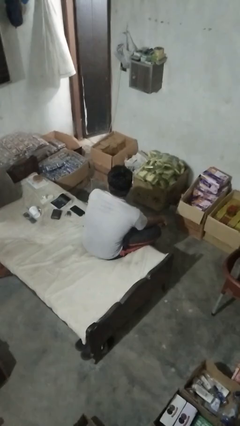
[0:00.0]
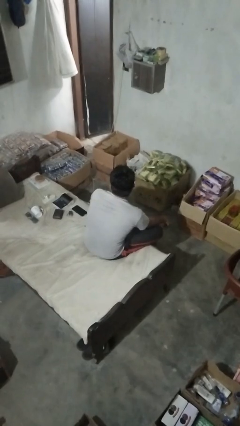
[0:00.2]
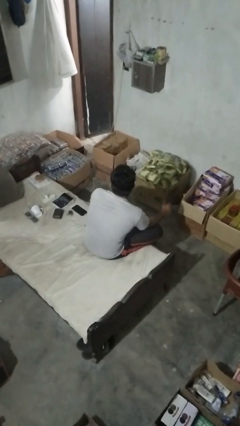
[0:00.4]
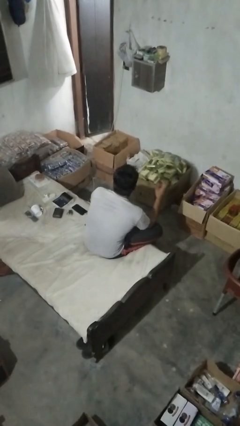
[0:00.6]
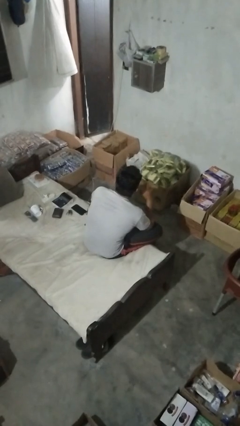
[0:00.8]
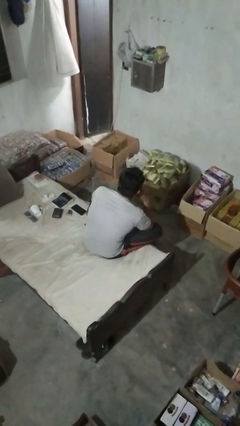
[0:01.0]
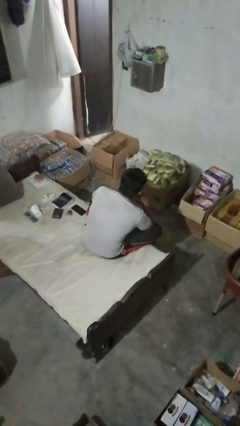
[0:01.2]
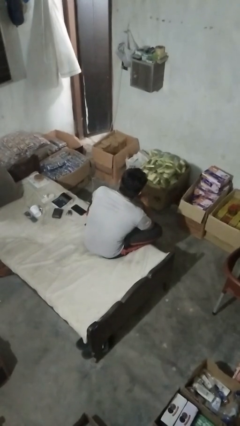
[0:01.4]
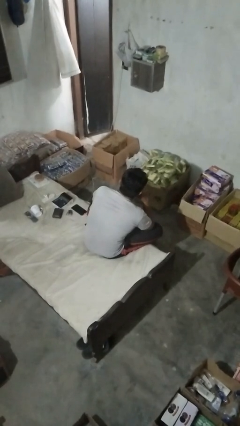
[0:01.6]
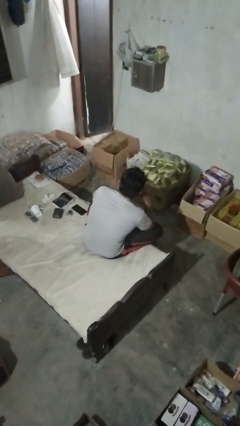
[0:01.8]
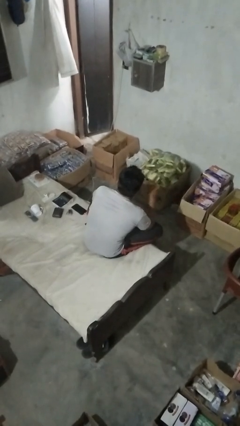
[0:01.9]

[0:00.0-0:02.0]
person strokes chin

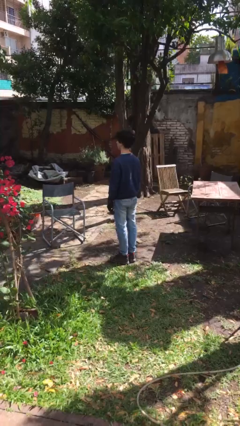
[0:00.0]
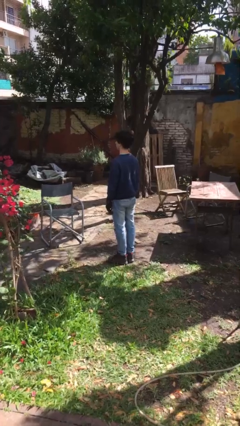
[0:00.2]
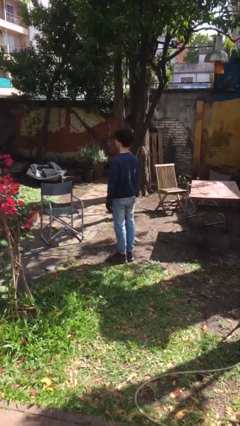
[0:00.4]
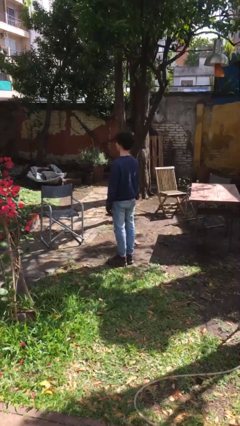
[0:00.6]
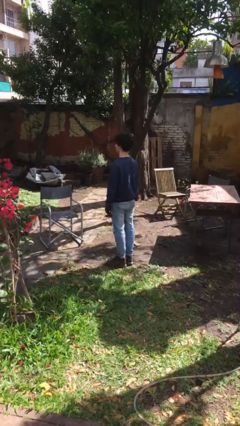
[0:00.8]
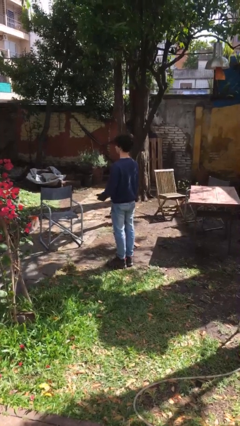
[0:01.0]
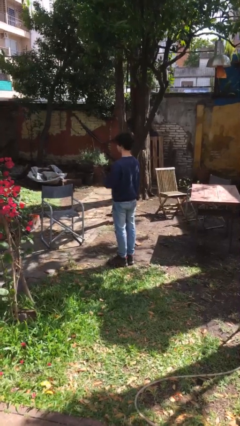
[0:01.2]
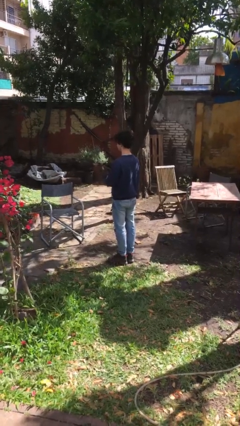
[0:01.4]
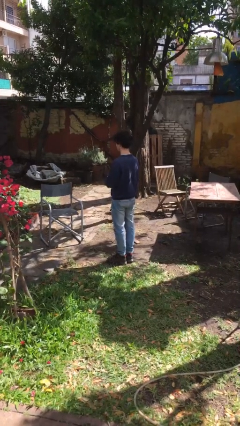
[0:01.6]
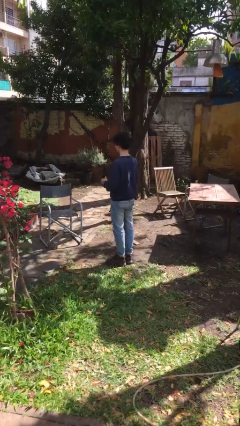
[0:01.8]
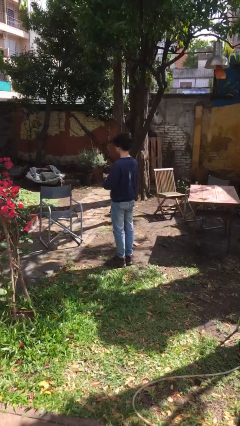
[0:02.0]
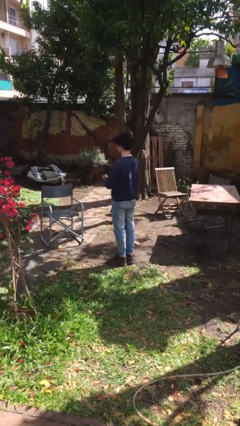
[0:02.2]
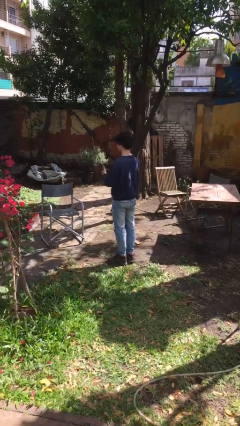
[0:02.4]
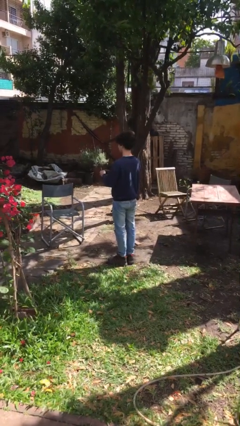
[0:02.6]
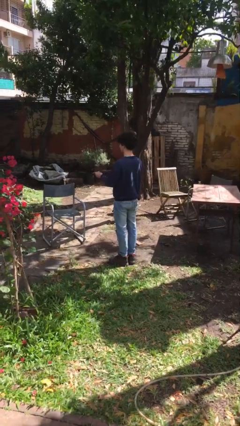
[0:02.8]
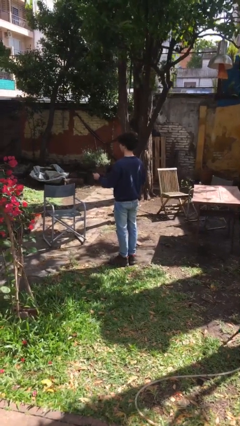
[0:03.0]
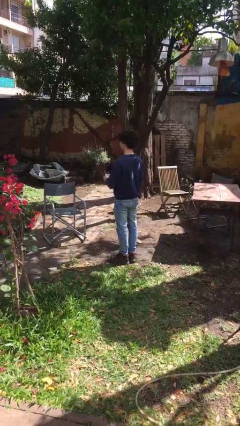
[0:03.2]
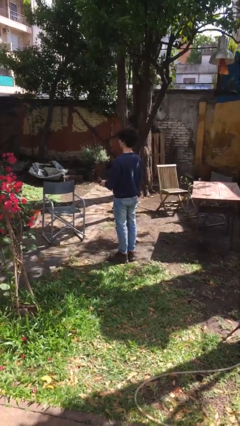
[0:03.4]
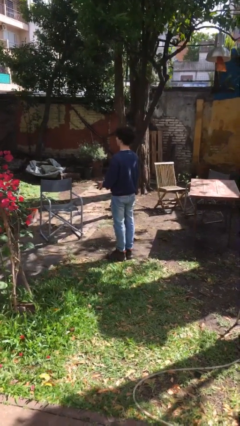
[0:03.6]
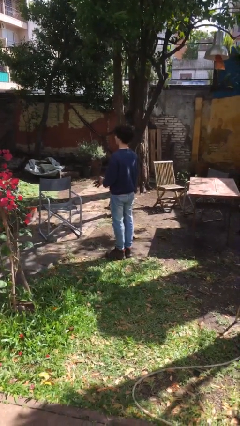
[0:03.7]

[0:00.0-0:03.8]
person takes off gloves

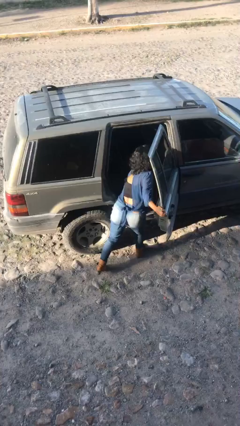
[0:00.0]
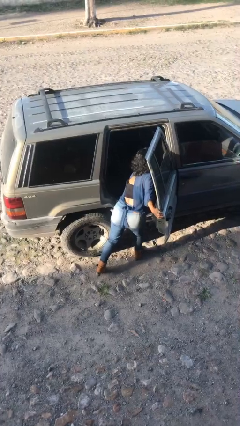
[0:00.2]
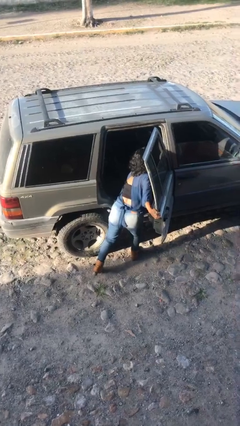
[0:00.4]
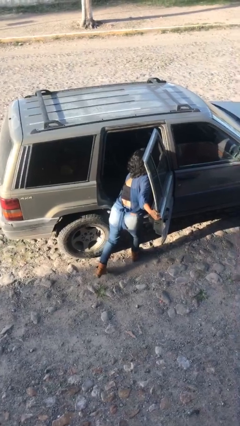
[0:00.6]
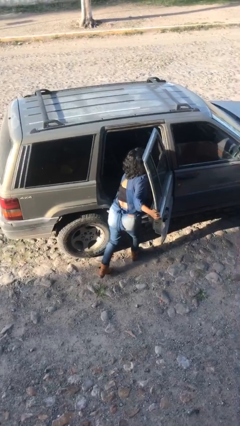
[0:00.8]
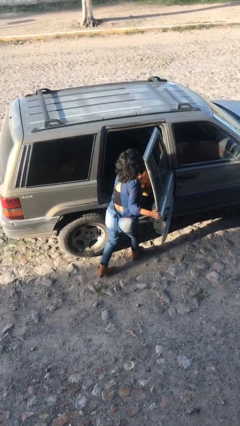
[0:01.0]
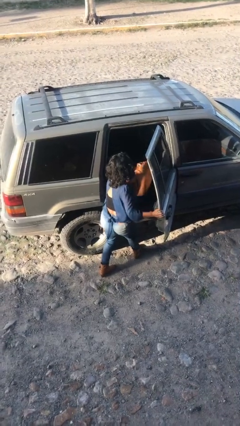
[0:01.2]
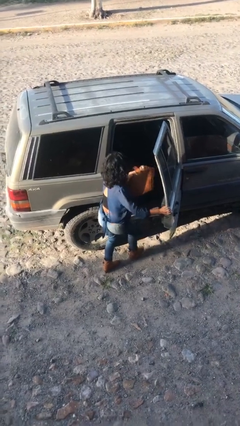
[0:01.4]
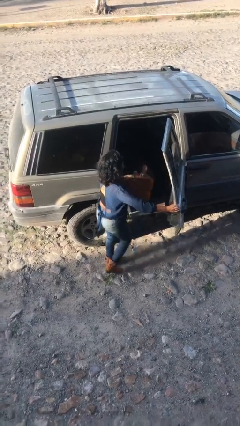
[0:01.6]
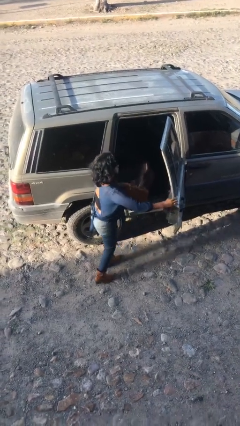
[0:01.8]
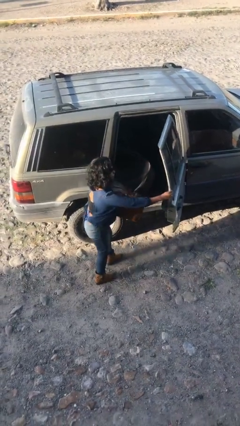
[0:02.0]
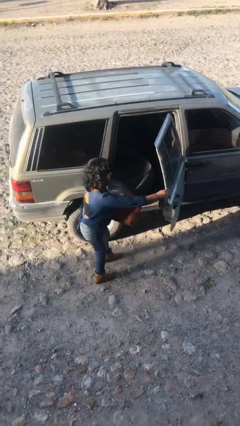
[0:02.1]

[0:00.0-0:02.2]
person unloads car

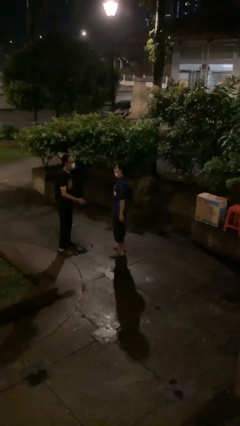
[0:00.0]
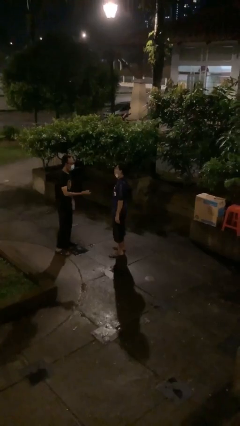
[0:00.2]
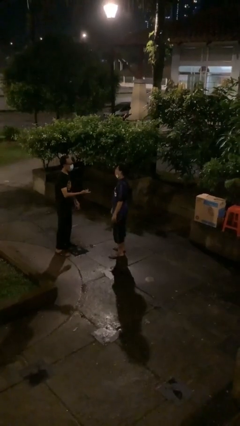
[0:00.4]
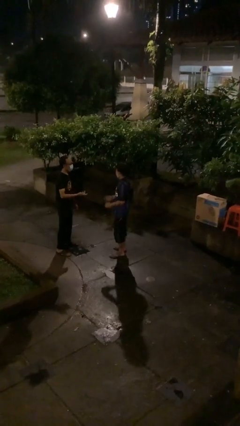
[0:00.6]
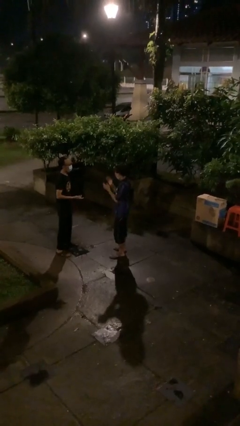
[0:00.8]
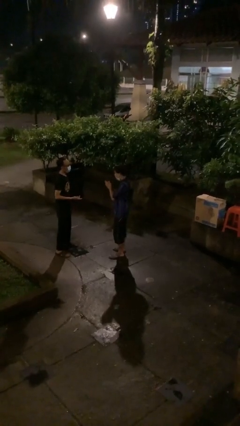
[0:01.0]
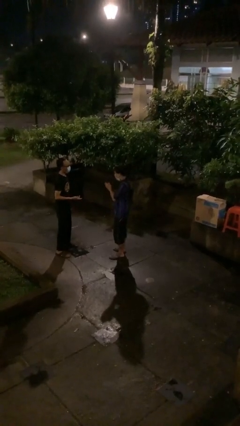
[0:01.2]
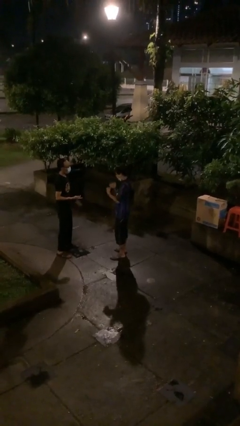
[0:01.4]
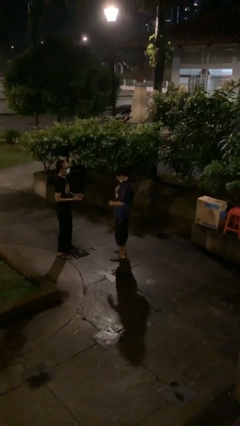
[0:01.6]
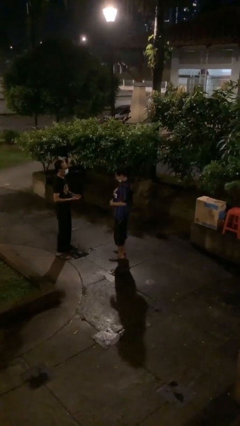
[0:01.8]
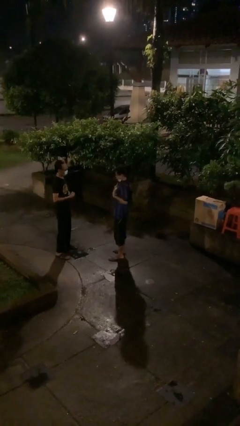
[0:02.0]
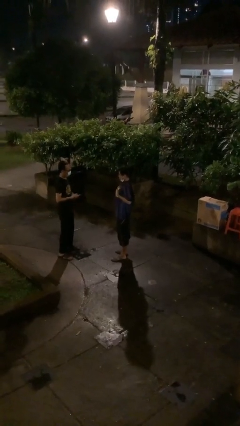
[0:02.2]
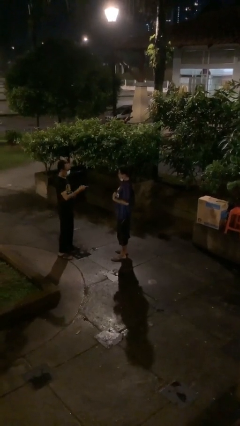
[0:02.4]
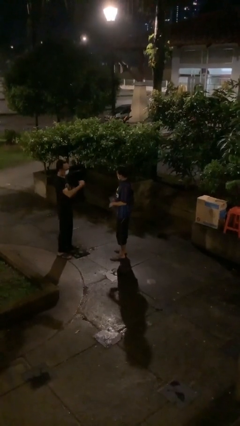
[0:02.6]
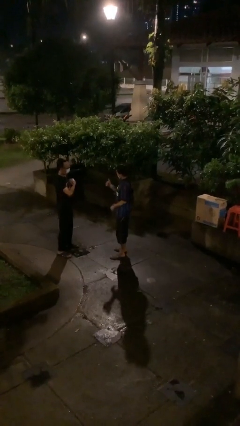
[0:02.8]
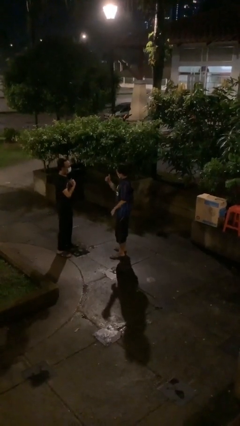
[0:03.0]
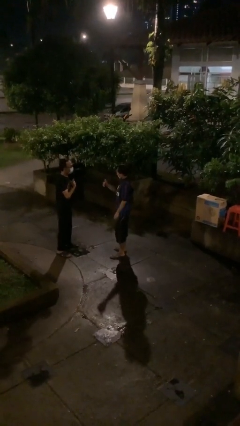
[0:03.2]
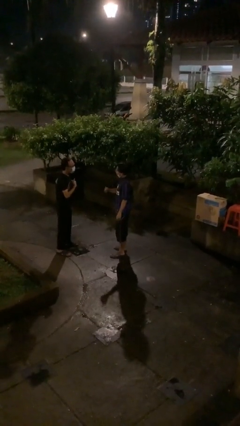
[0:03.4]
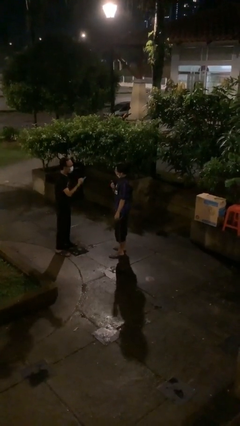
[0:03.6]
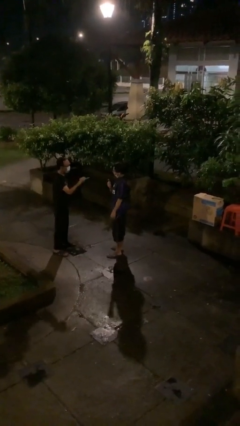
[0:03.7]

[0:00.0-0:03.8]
person talks to person

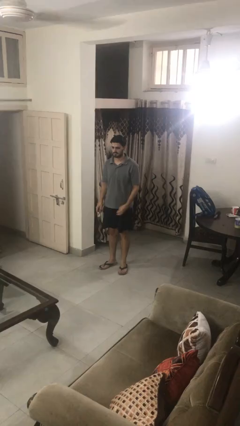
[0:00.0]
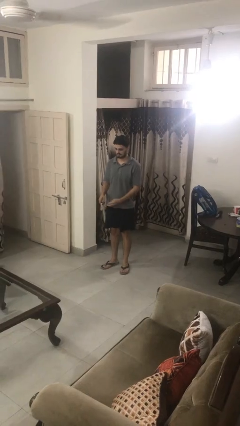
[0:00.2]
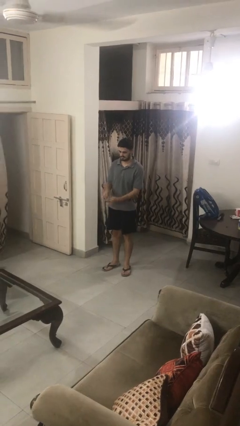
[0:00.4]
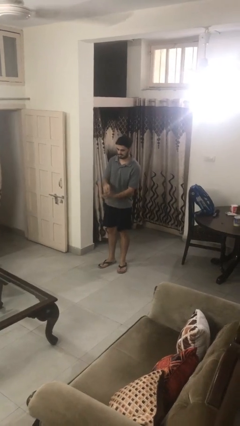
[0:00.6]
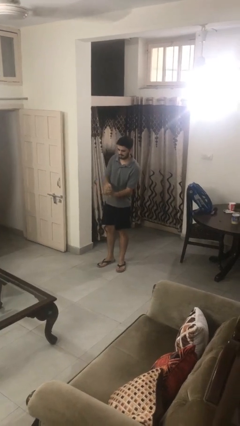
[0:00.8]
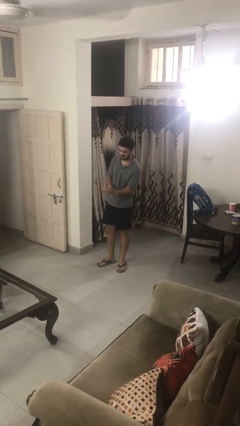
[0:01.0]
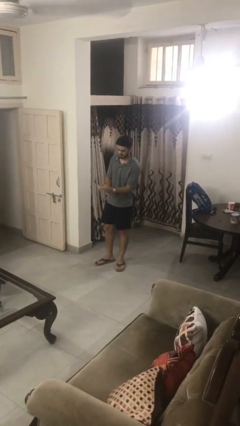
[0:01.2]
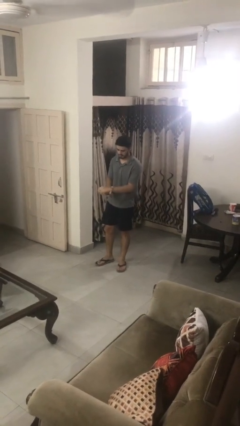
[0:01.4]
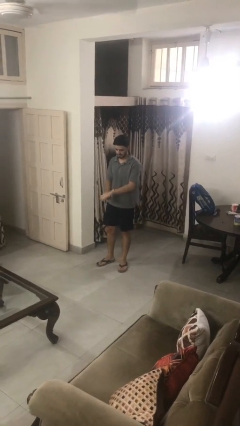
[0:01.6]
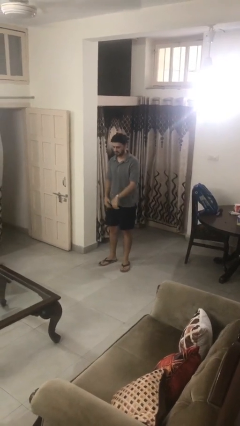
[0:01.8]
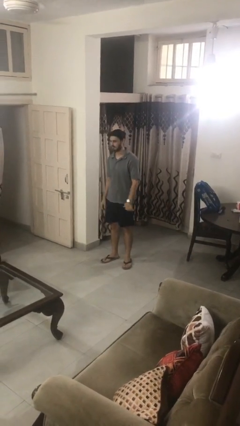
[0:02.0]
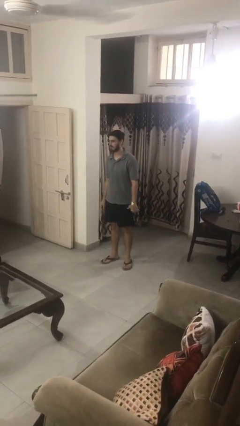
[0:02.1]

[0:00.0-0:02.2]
person puts on wristwatch

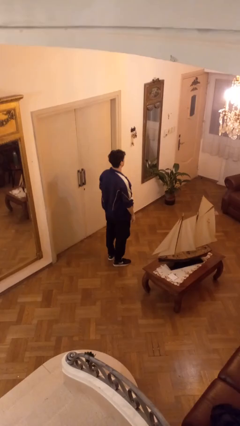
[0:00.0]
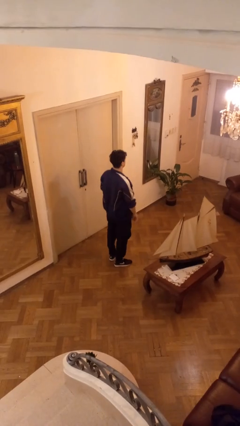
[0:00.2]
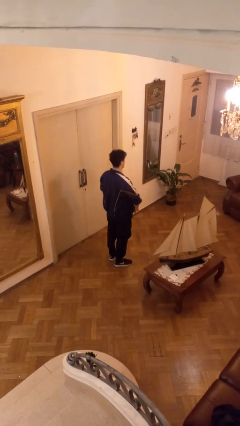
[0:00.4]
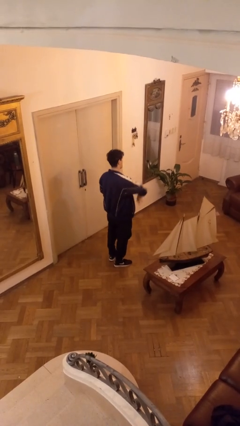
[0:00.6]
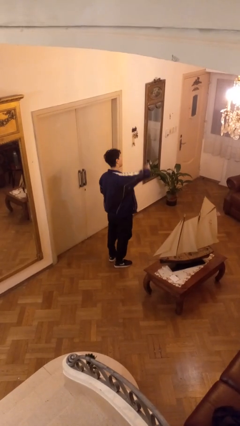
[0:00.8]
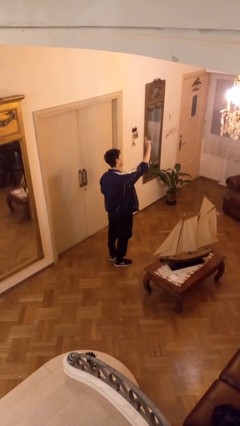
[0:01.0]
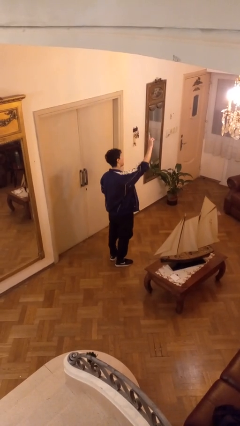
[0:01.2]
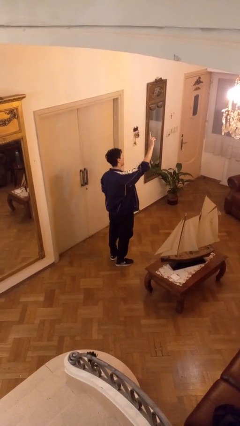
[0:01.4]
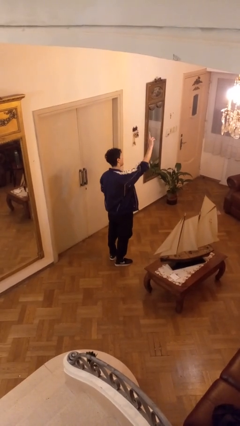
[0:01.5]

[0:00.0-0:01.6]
person gestures swipe up

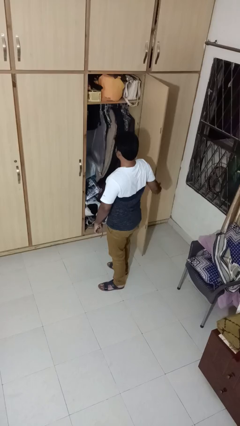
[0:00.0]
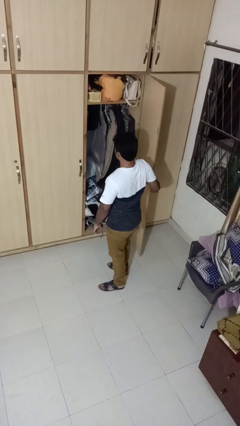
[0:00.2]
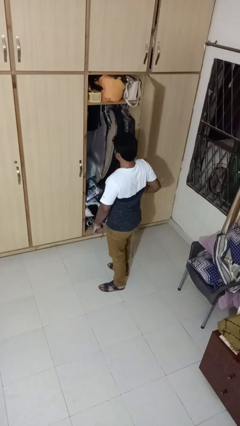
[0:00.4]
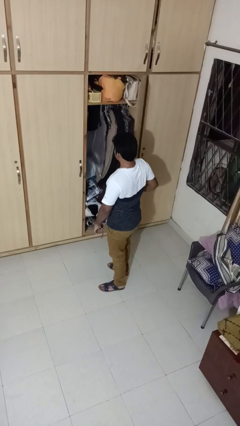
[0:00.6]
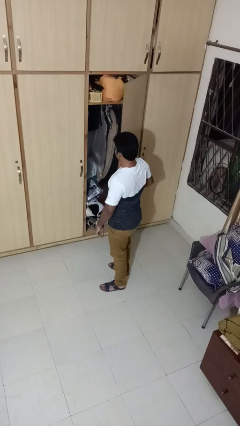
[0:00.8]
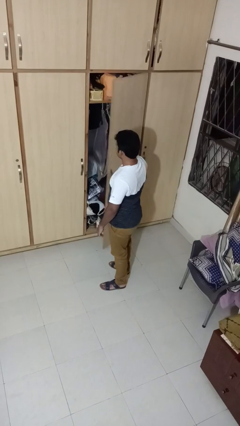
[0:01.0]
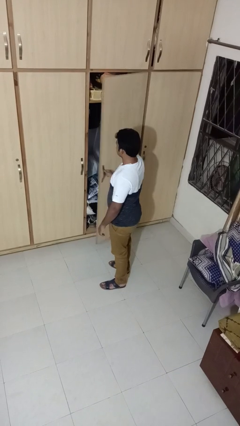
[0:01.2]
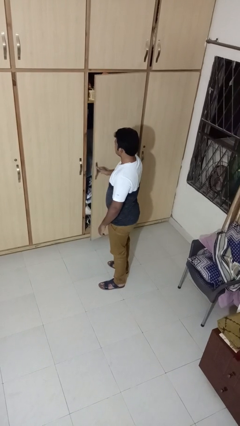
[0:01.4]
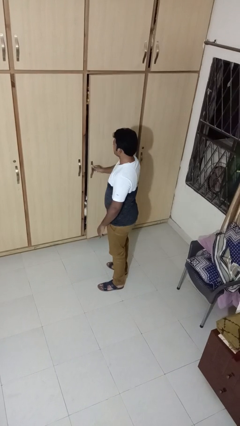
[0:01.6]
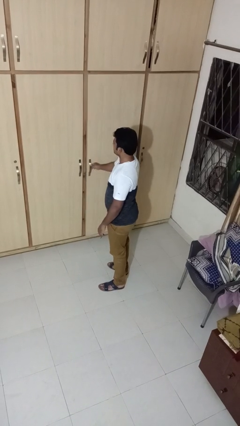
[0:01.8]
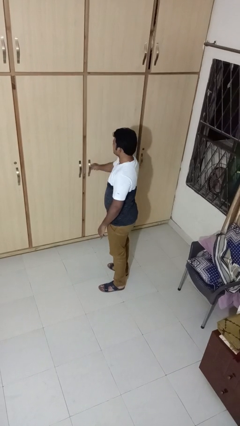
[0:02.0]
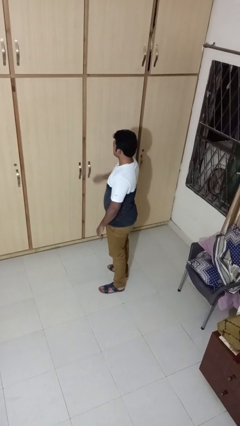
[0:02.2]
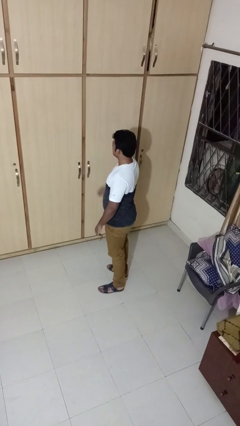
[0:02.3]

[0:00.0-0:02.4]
person closes closet door
